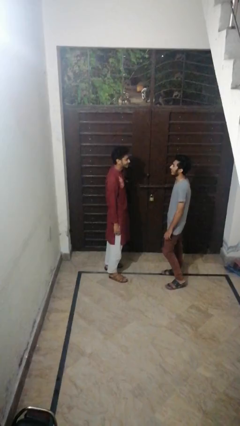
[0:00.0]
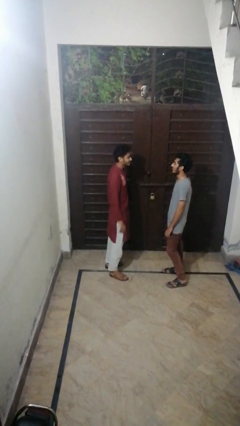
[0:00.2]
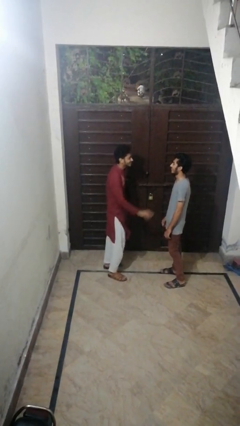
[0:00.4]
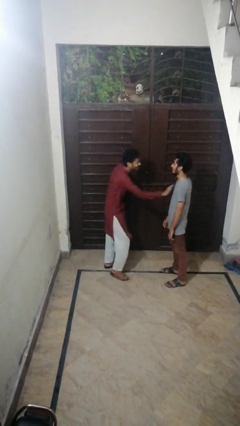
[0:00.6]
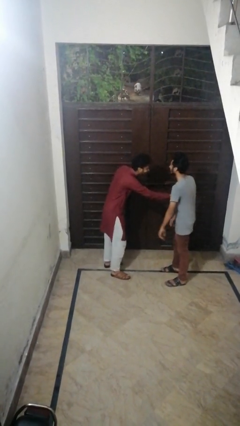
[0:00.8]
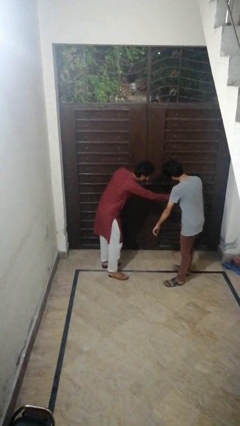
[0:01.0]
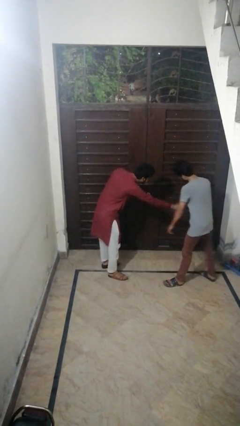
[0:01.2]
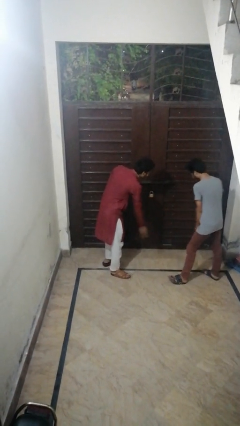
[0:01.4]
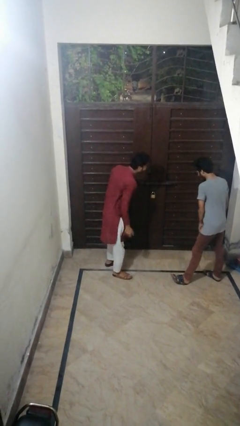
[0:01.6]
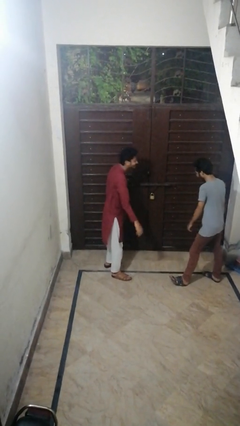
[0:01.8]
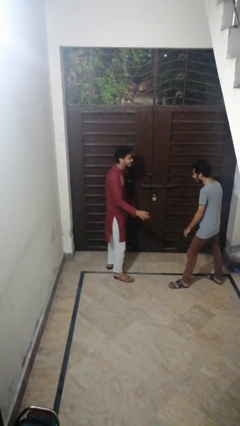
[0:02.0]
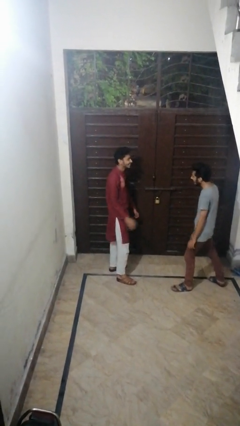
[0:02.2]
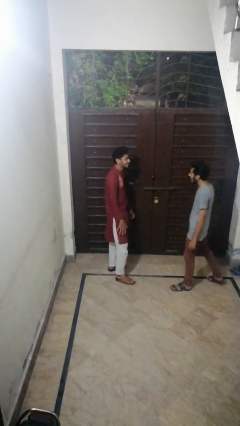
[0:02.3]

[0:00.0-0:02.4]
person shoves person

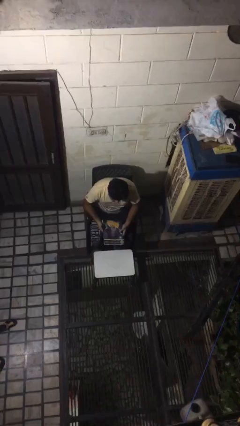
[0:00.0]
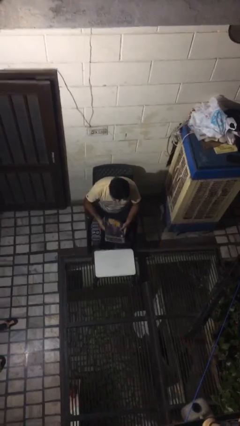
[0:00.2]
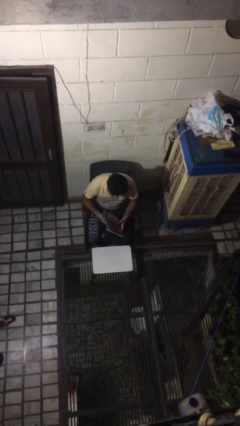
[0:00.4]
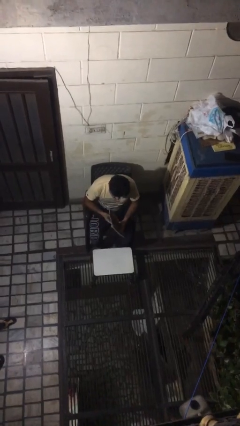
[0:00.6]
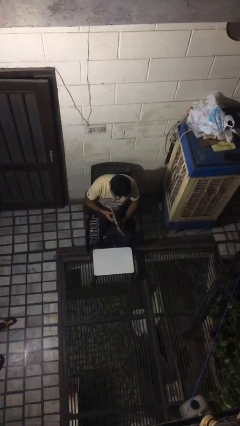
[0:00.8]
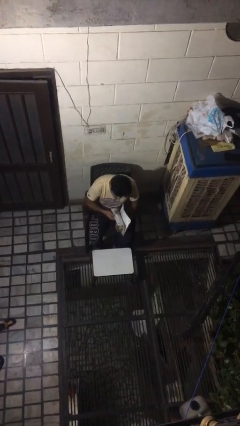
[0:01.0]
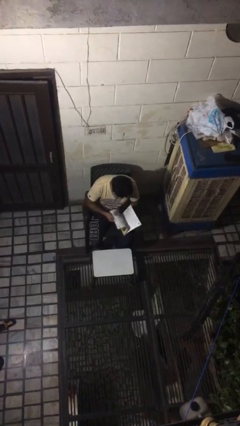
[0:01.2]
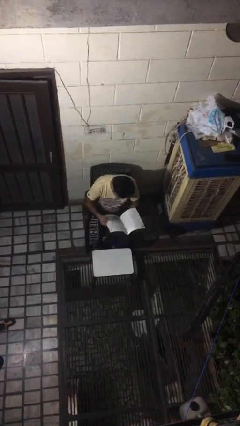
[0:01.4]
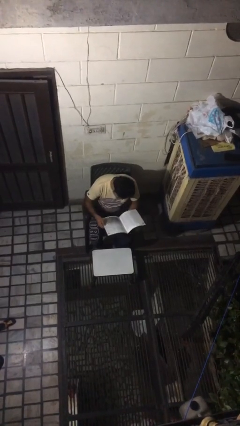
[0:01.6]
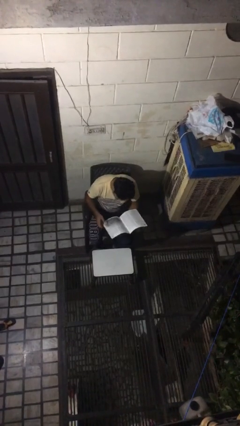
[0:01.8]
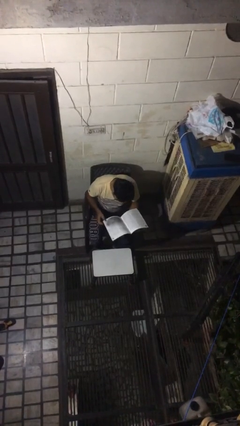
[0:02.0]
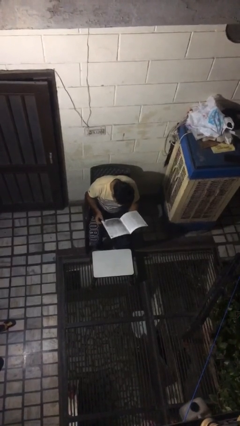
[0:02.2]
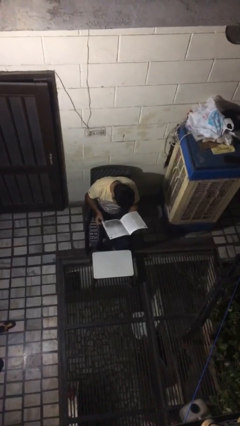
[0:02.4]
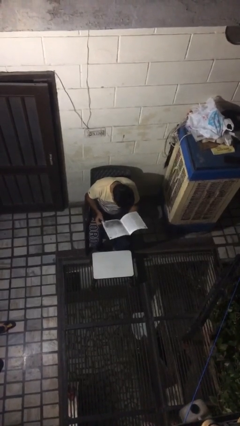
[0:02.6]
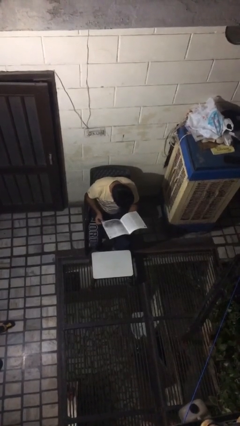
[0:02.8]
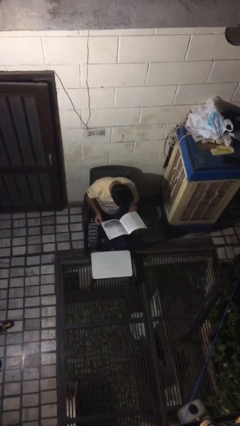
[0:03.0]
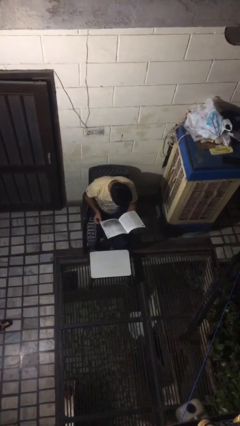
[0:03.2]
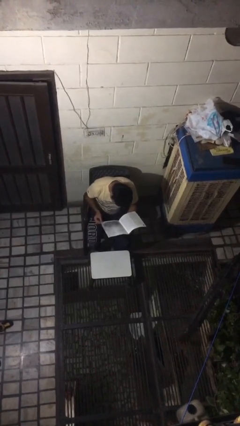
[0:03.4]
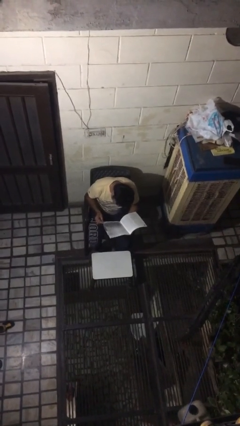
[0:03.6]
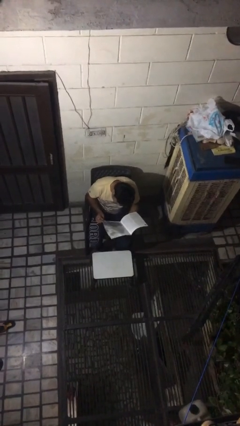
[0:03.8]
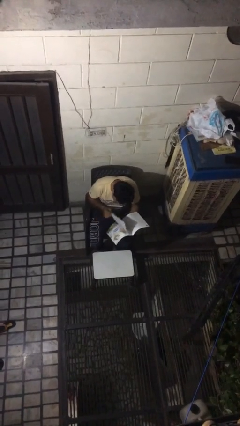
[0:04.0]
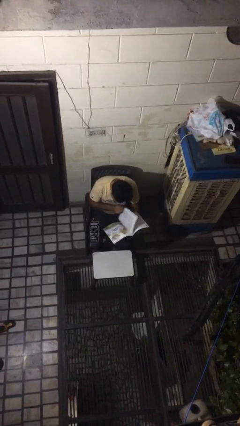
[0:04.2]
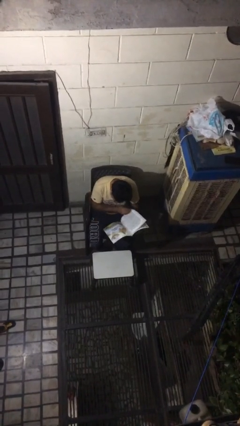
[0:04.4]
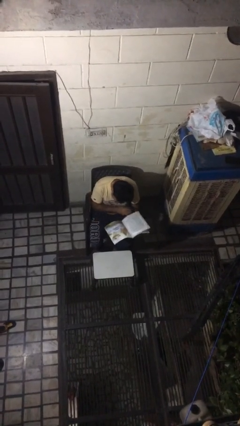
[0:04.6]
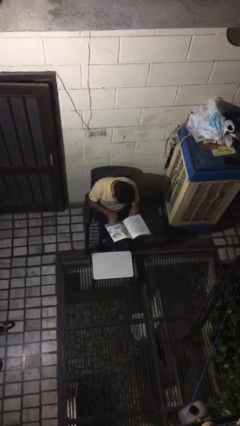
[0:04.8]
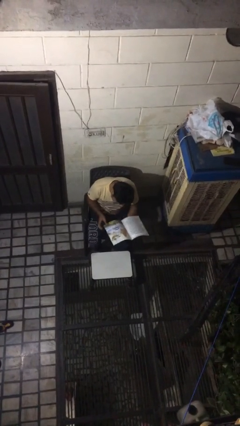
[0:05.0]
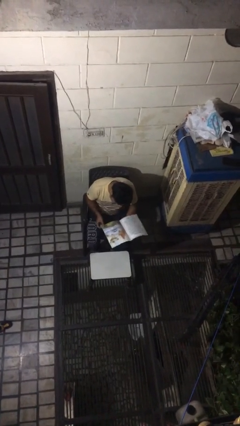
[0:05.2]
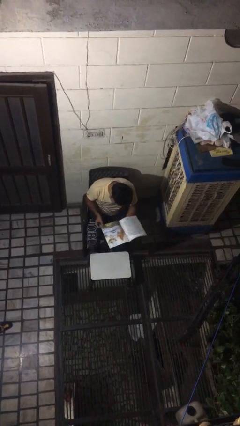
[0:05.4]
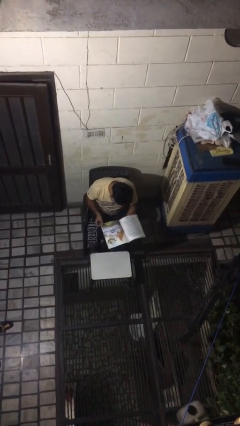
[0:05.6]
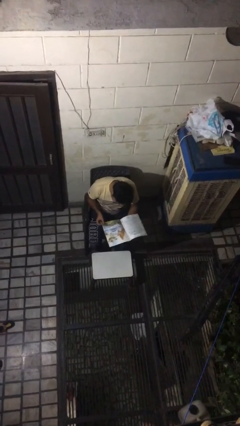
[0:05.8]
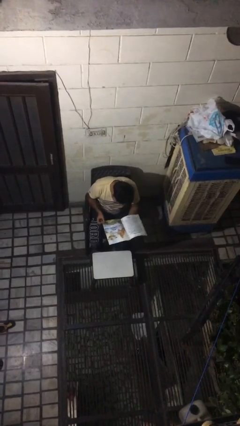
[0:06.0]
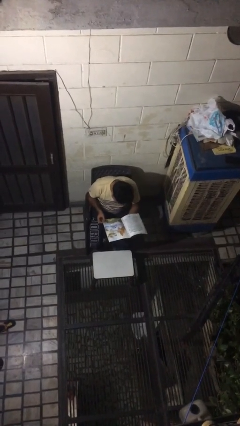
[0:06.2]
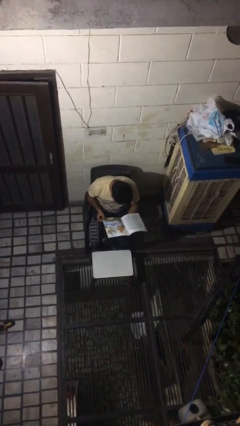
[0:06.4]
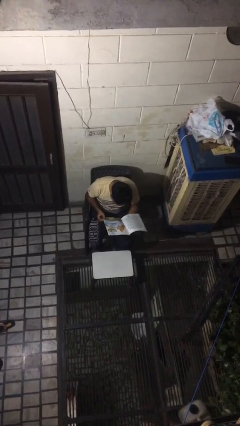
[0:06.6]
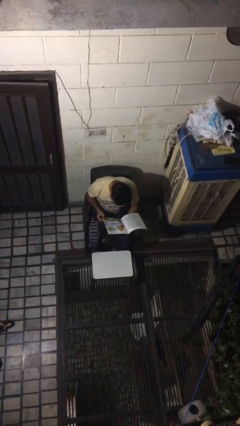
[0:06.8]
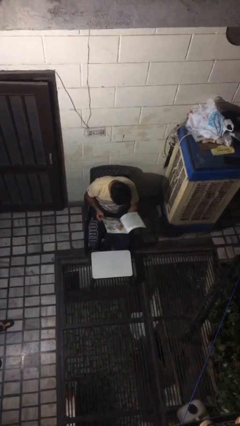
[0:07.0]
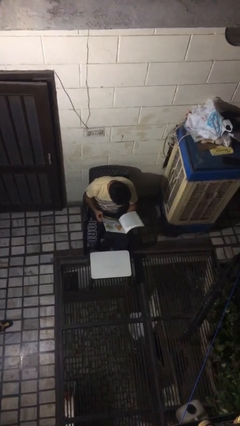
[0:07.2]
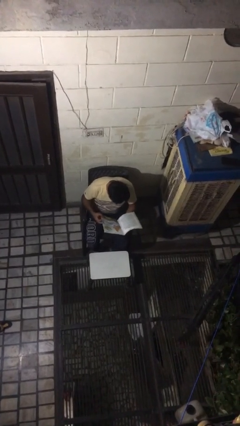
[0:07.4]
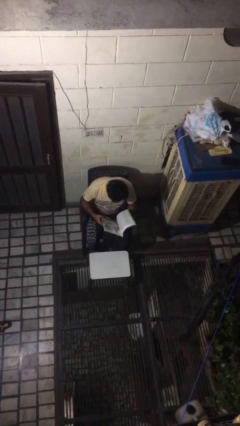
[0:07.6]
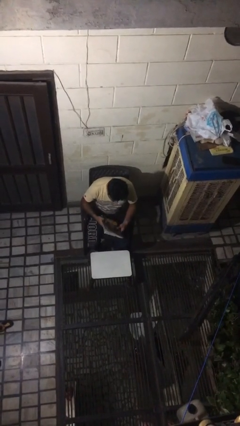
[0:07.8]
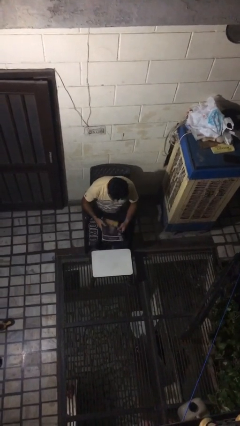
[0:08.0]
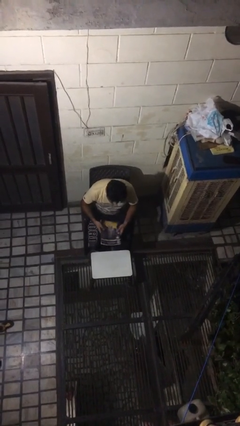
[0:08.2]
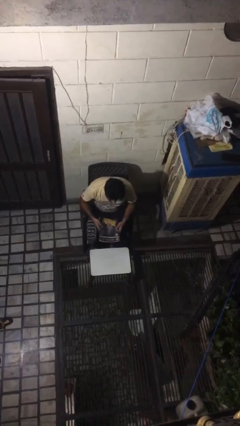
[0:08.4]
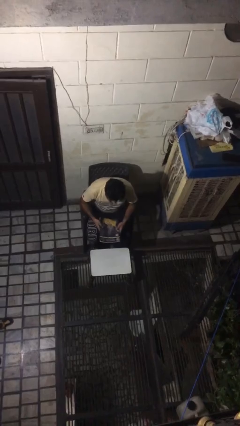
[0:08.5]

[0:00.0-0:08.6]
person reads magazine

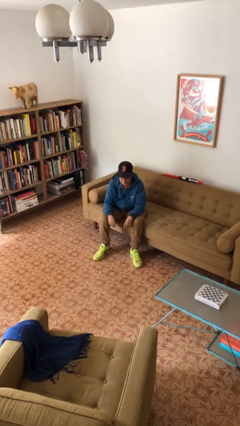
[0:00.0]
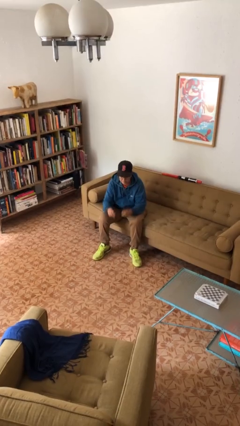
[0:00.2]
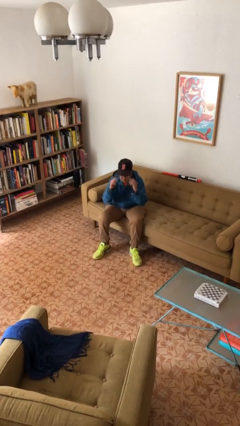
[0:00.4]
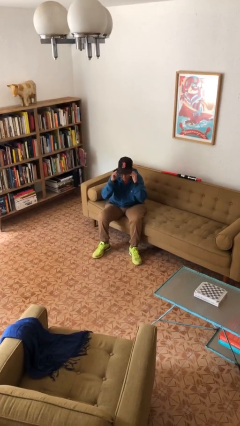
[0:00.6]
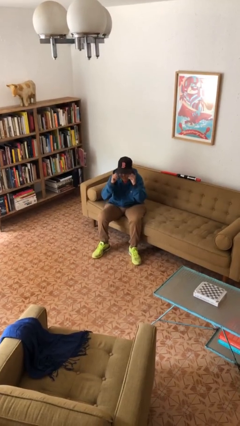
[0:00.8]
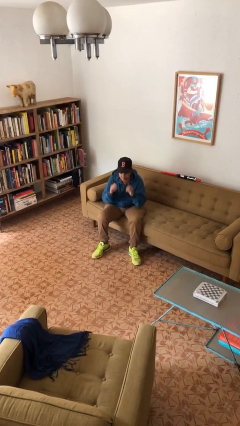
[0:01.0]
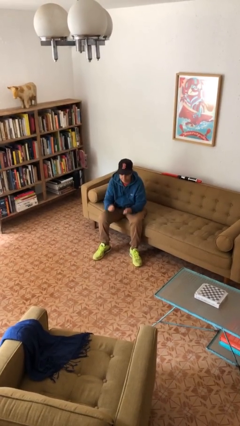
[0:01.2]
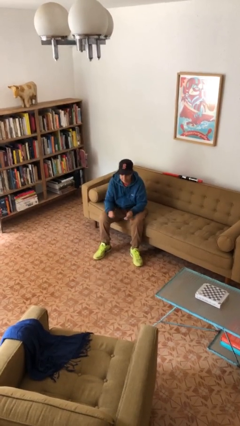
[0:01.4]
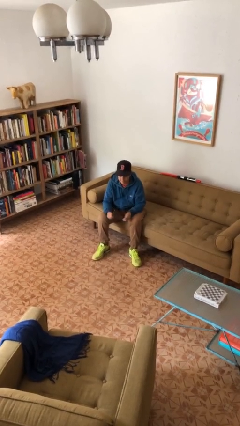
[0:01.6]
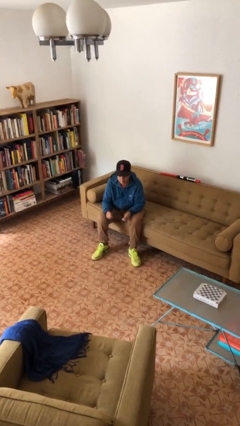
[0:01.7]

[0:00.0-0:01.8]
person takes off glasses

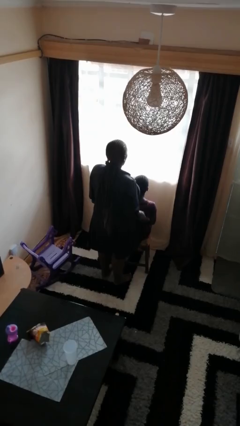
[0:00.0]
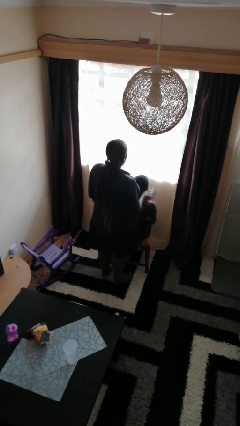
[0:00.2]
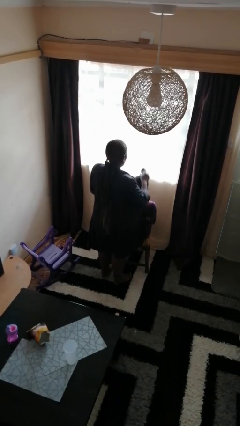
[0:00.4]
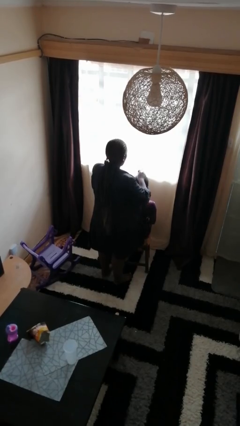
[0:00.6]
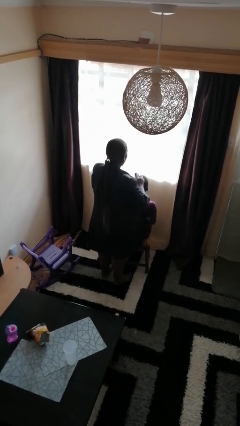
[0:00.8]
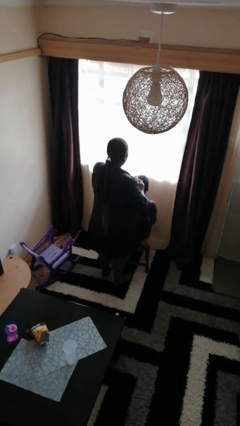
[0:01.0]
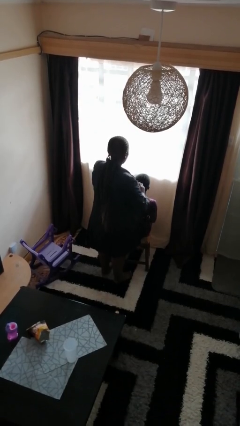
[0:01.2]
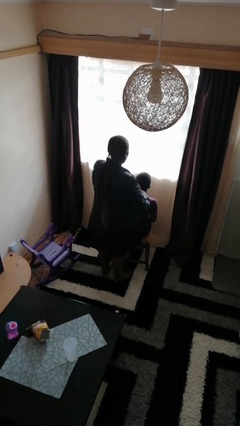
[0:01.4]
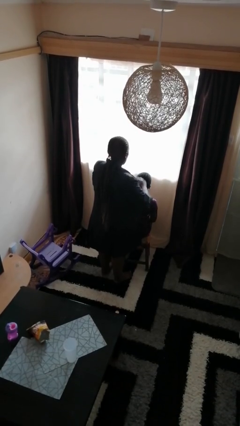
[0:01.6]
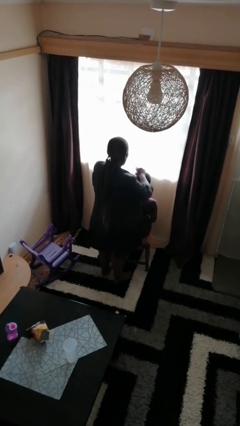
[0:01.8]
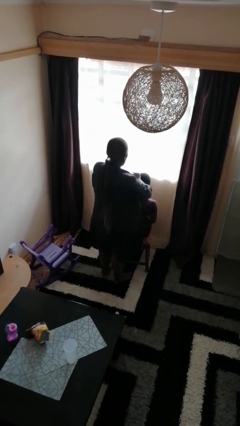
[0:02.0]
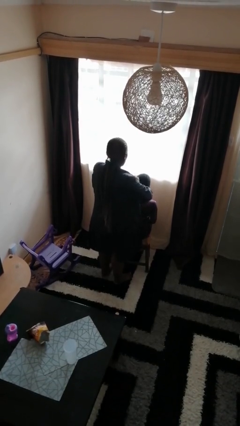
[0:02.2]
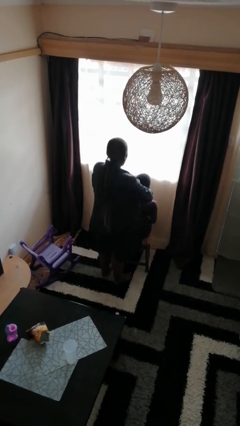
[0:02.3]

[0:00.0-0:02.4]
person brushes hair of person

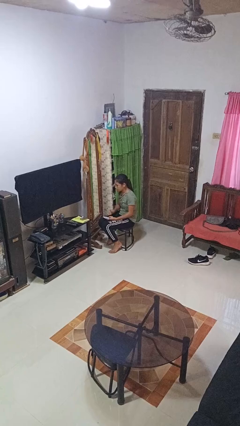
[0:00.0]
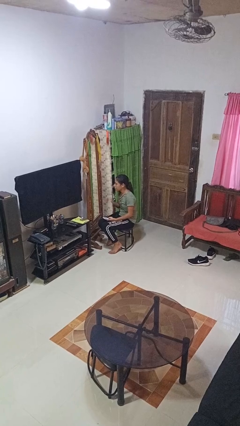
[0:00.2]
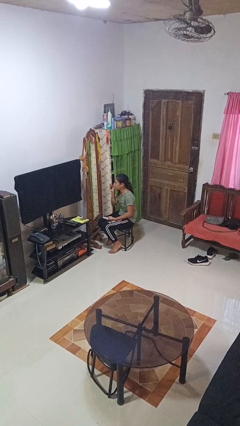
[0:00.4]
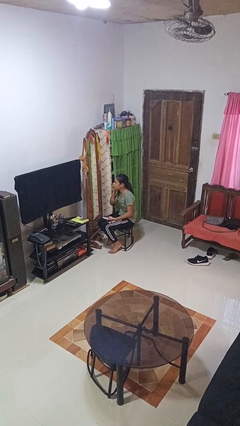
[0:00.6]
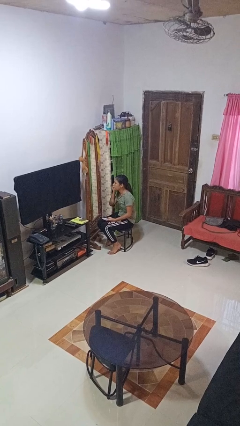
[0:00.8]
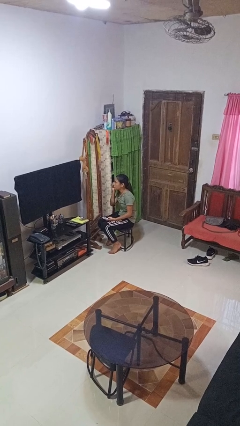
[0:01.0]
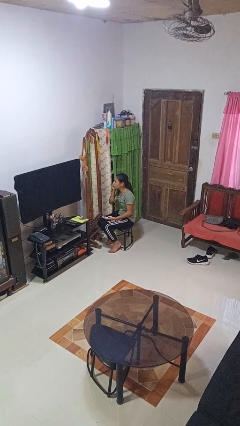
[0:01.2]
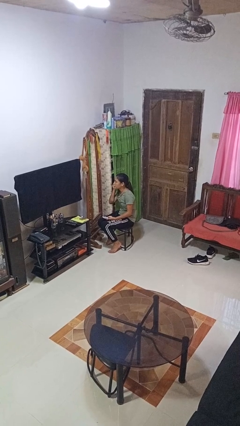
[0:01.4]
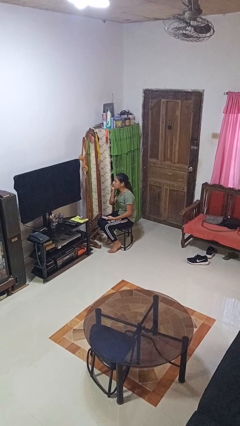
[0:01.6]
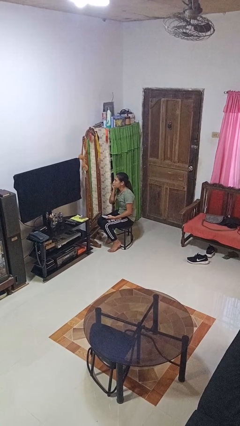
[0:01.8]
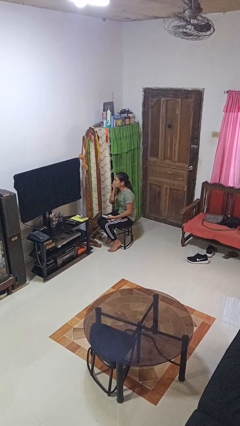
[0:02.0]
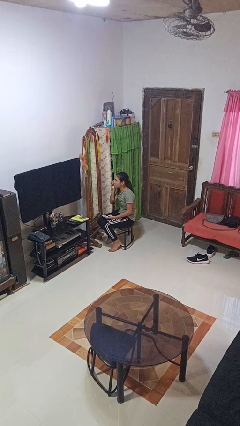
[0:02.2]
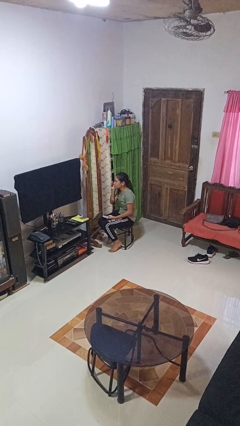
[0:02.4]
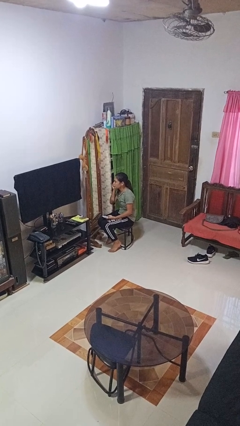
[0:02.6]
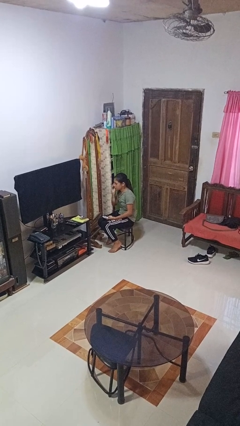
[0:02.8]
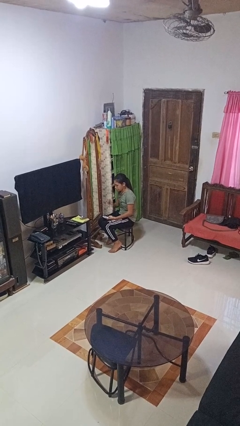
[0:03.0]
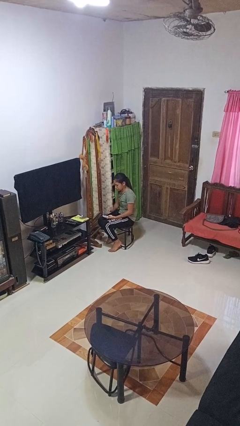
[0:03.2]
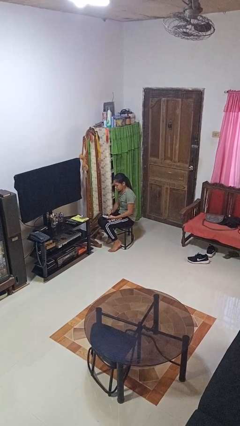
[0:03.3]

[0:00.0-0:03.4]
person applies foundation makeup
